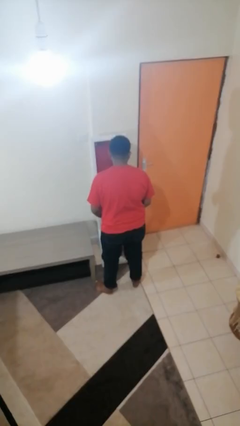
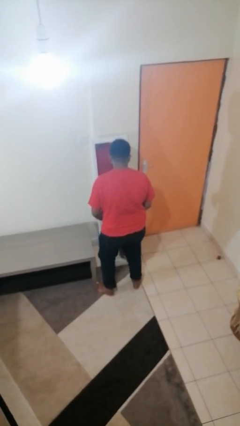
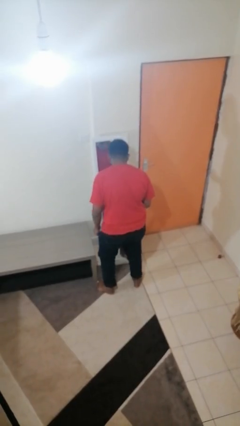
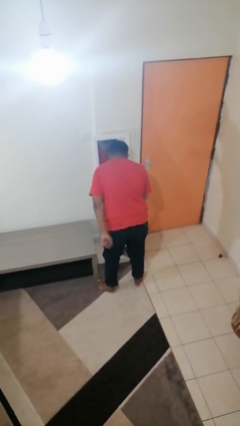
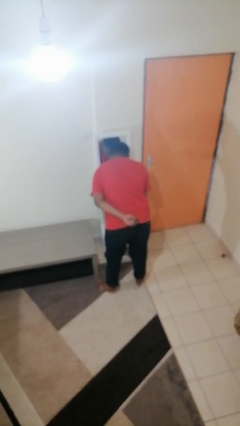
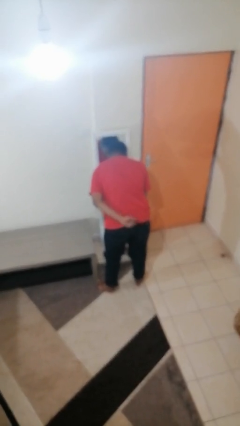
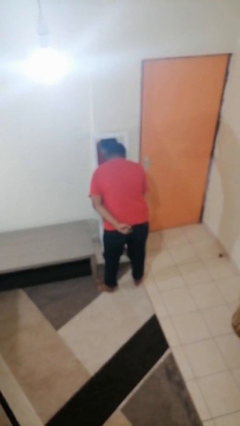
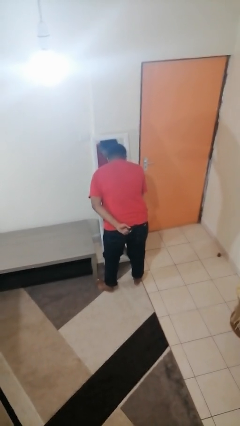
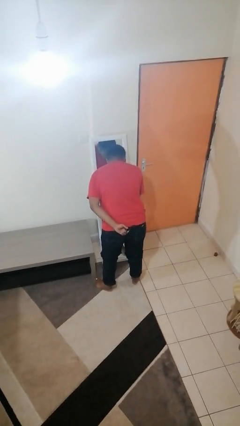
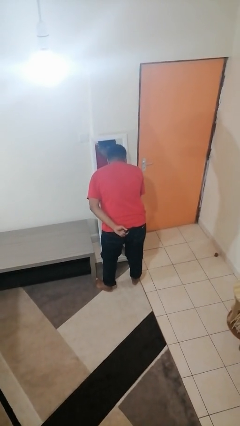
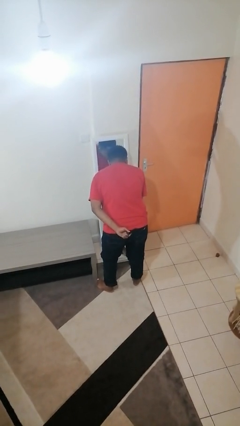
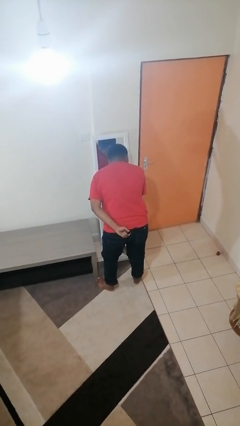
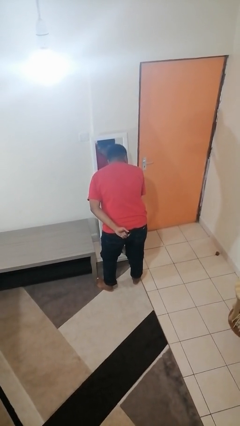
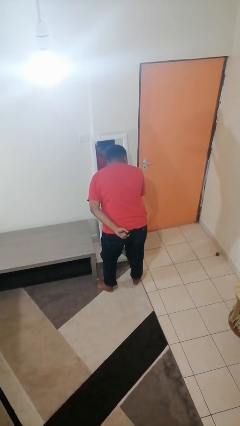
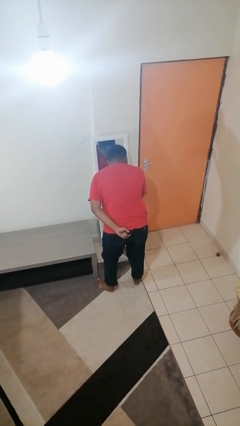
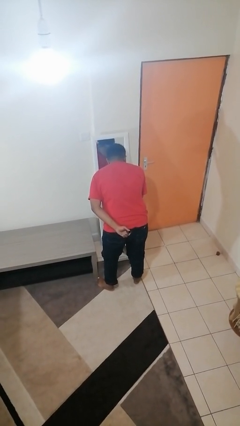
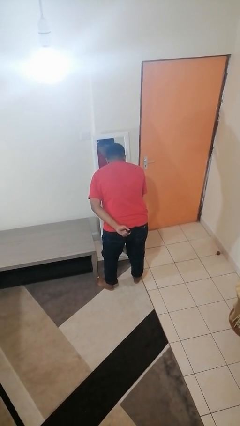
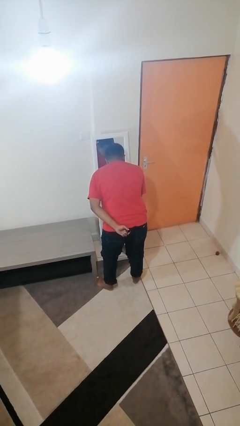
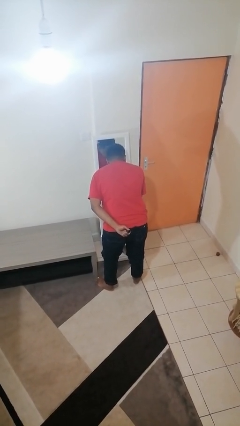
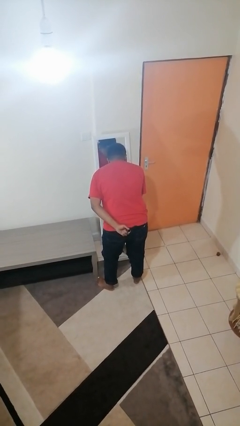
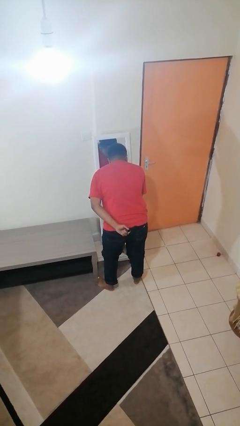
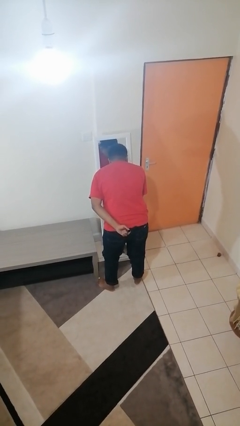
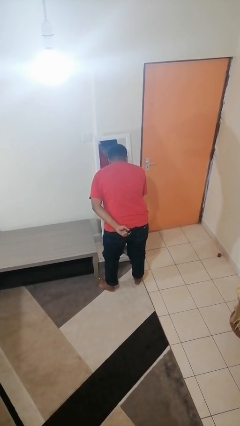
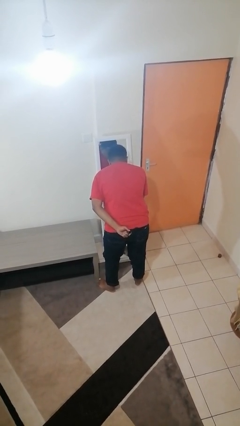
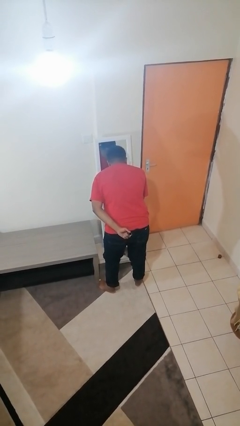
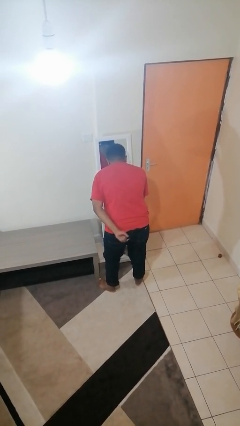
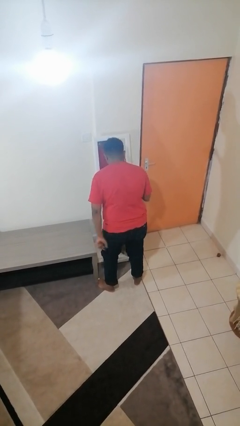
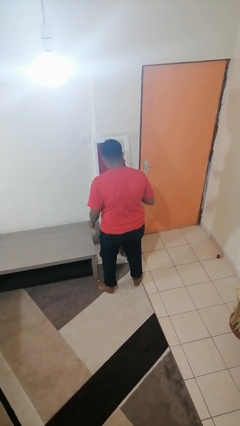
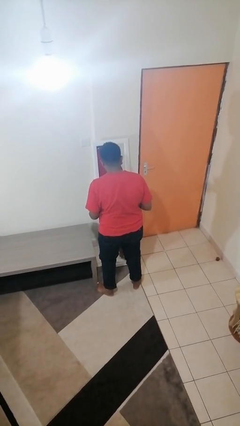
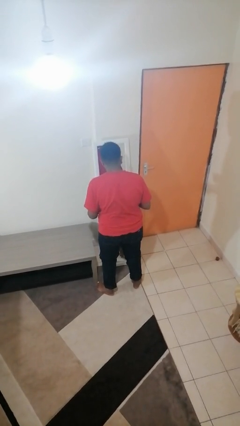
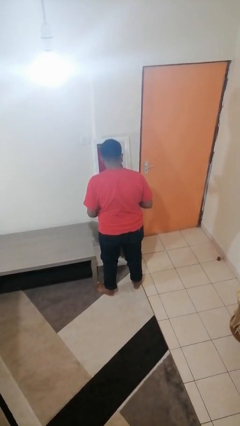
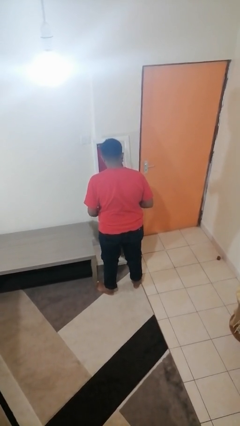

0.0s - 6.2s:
person applies lip makeup

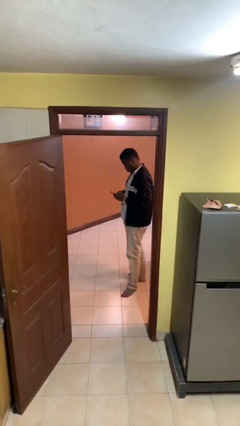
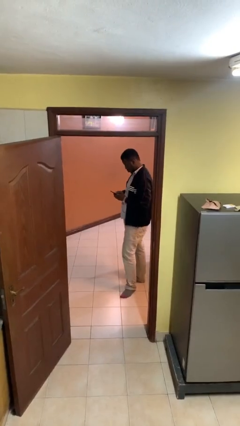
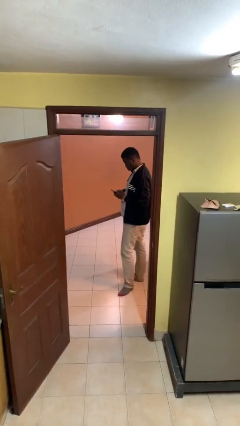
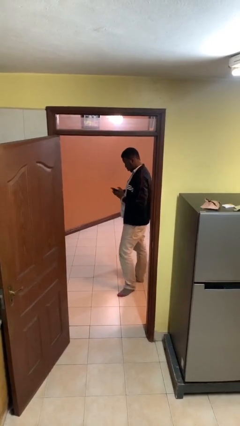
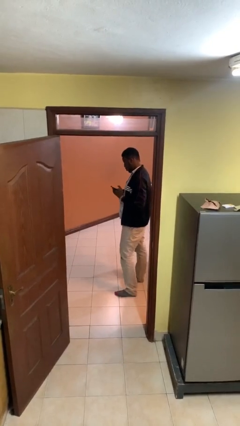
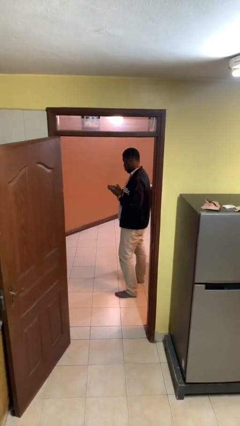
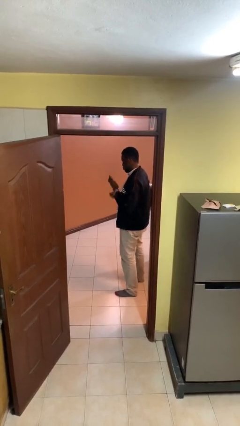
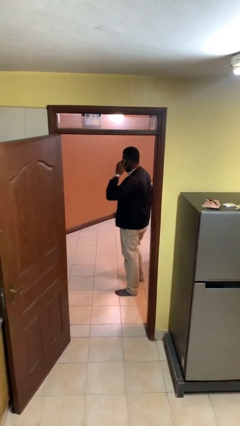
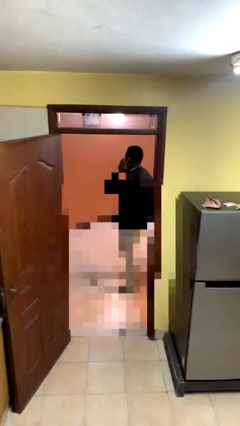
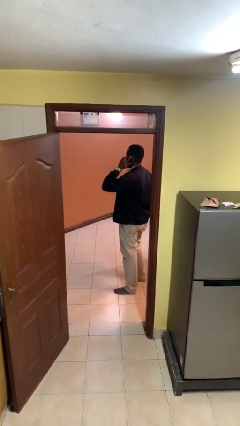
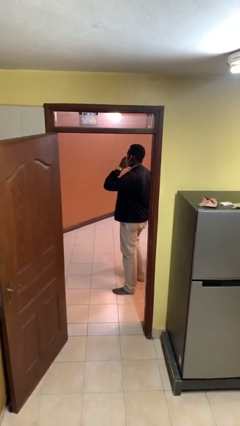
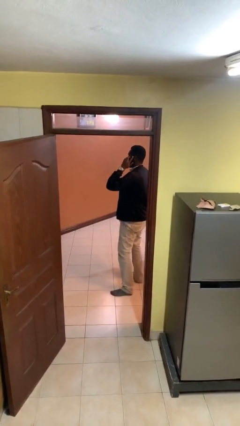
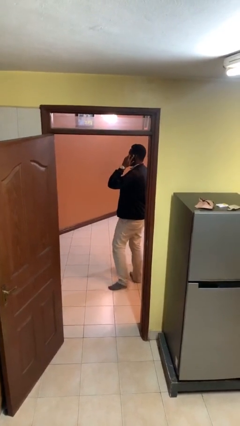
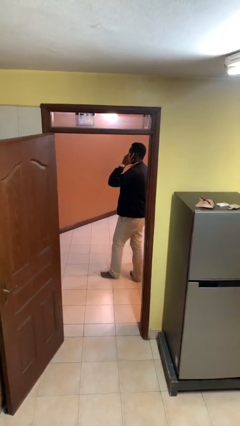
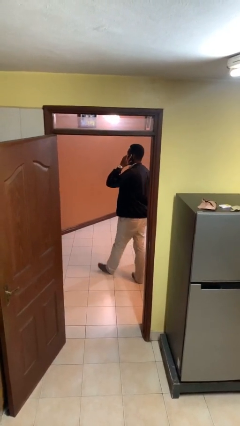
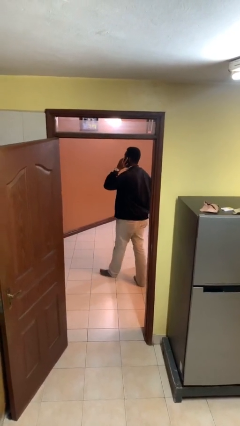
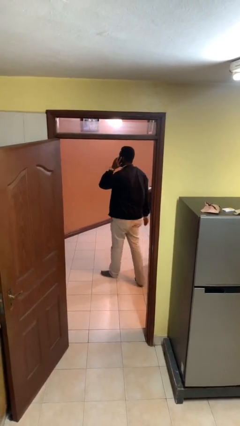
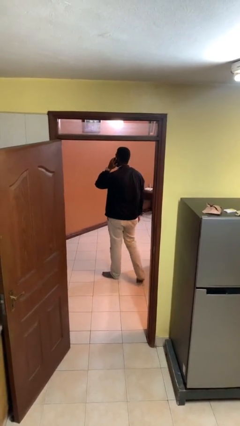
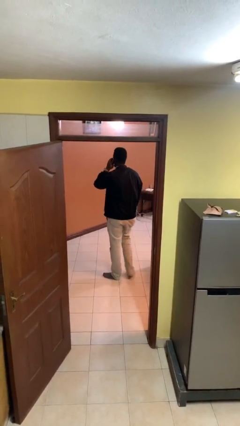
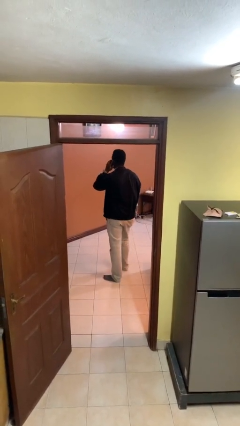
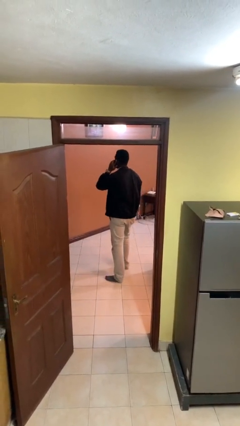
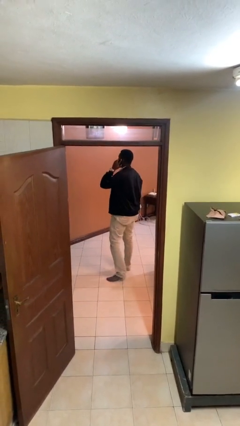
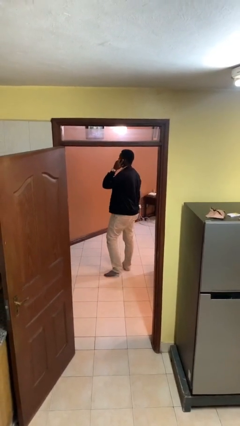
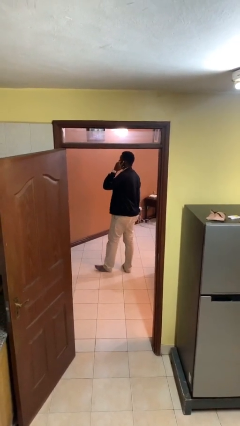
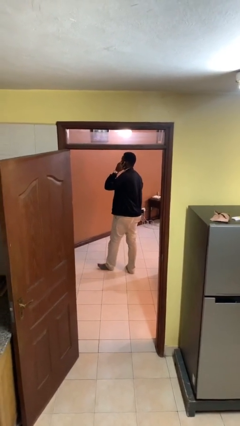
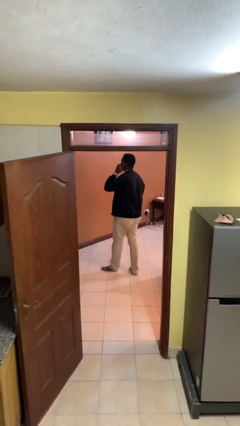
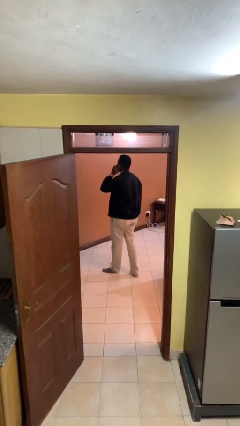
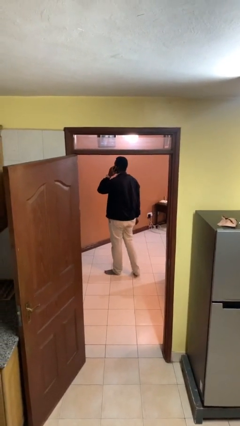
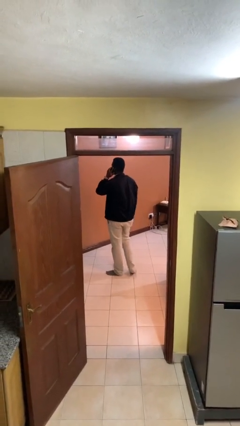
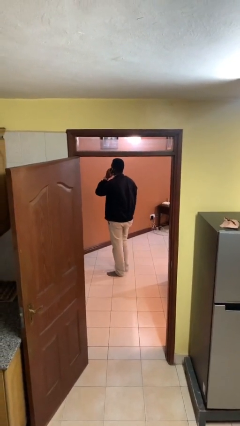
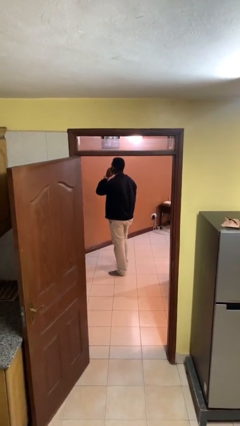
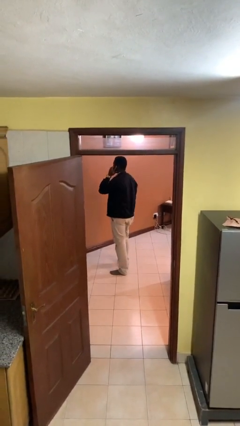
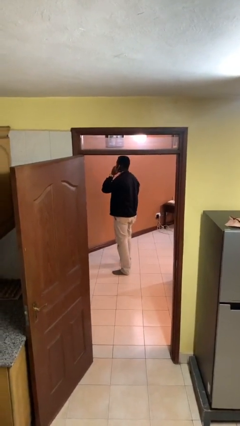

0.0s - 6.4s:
person talks on phone

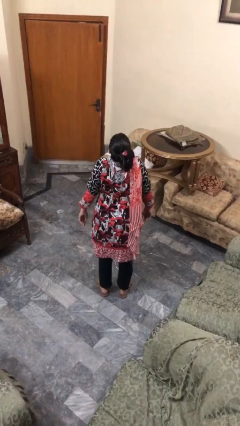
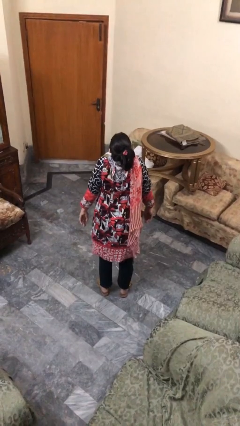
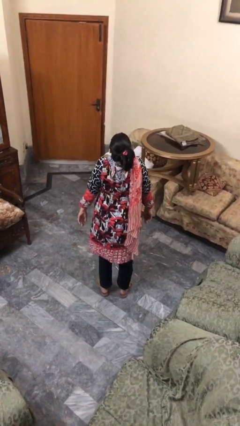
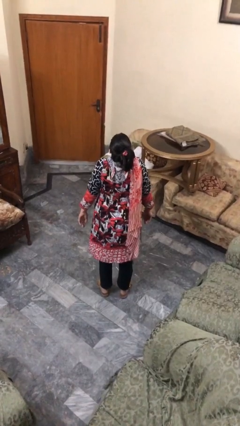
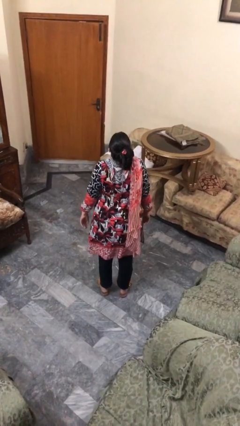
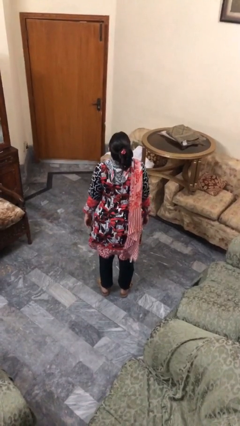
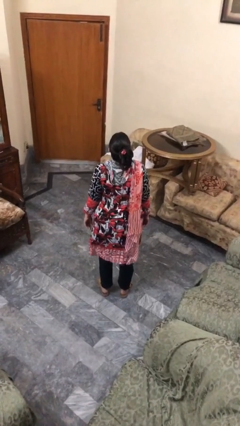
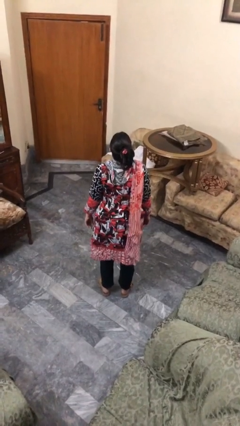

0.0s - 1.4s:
person shrugs

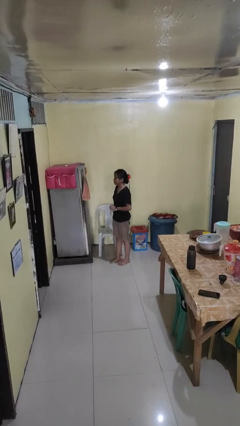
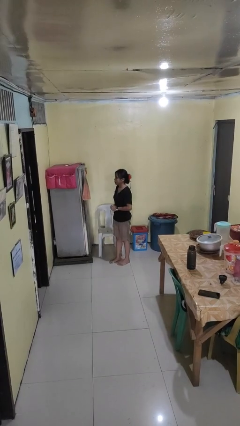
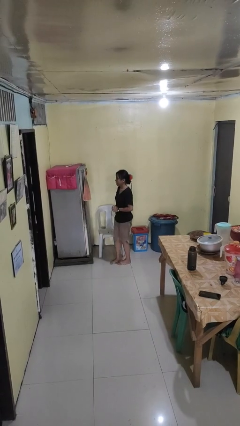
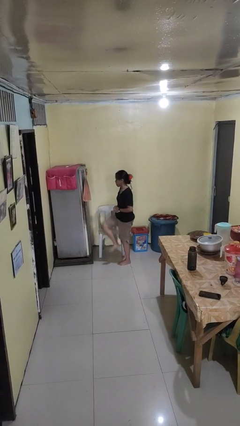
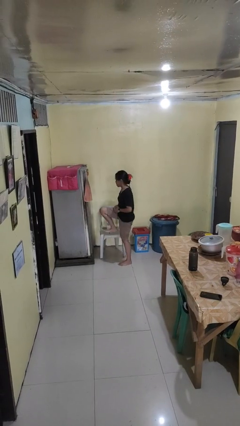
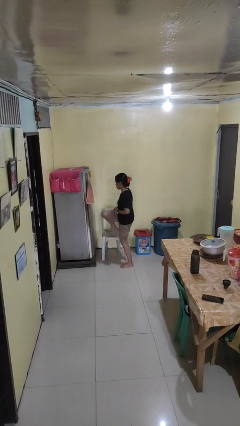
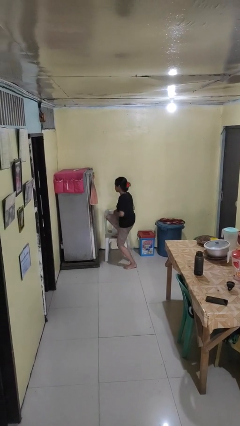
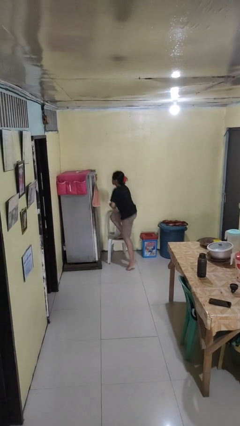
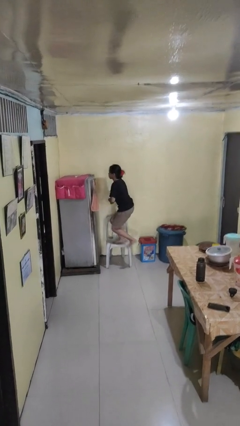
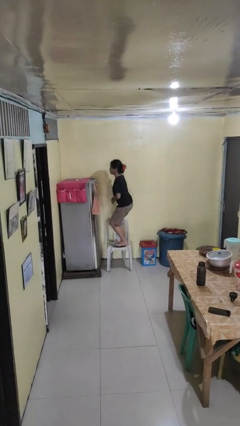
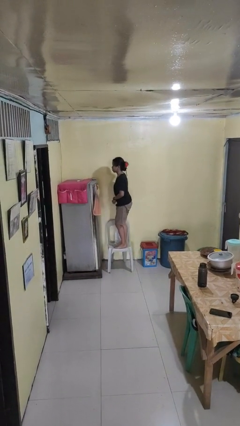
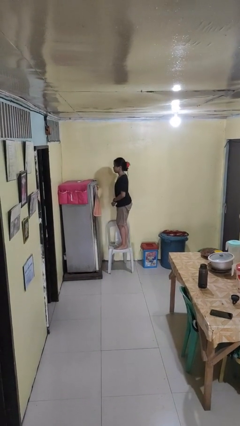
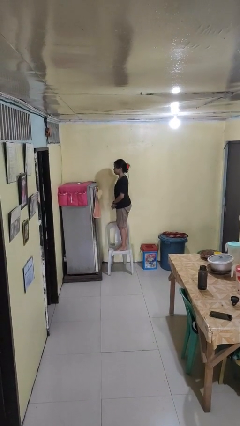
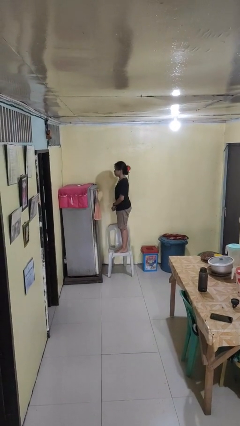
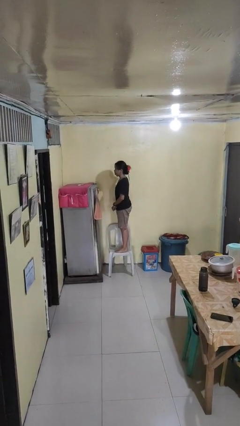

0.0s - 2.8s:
person climbs on chair

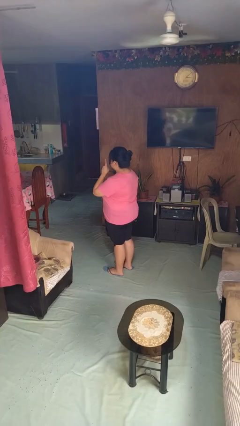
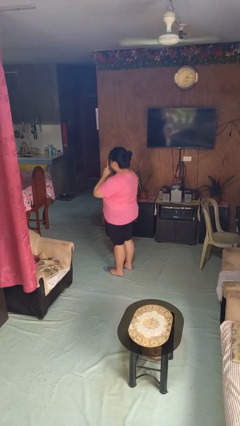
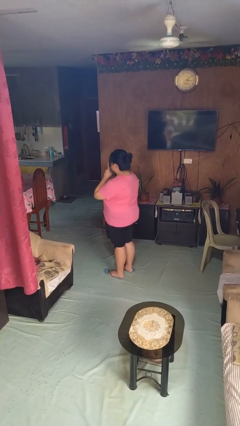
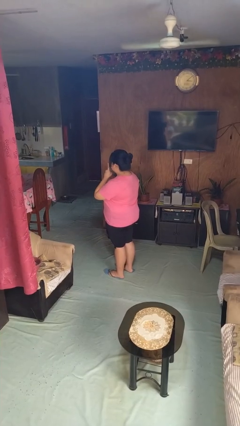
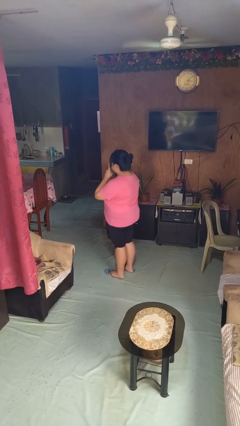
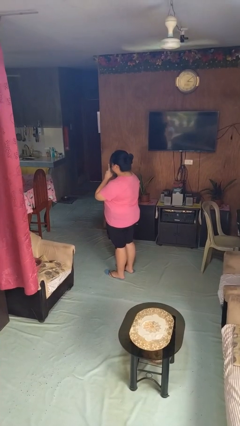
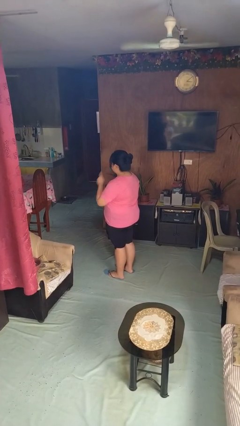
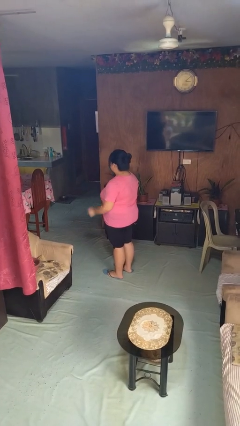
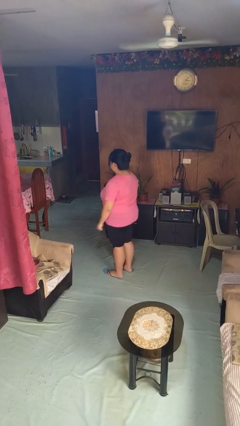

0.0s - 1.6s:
person gestures be quiet
